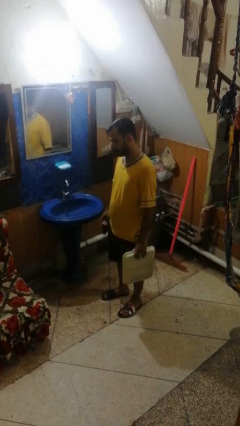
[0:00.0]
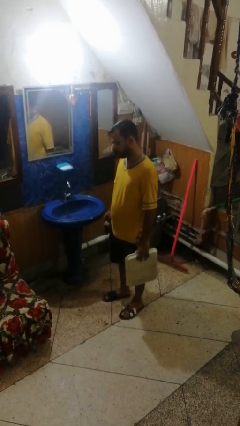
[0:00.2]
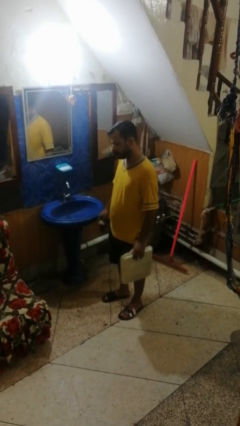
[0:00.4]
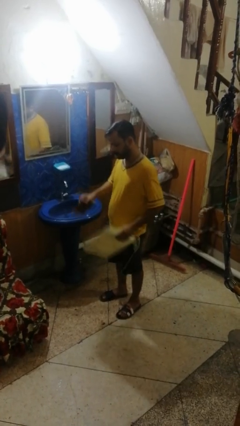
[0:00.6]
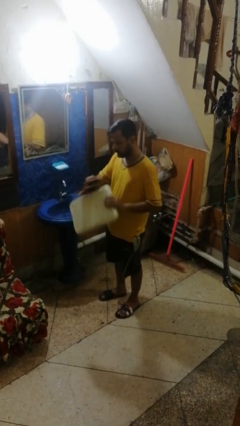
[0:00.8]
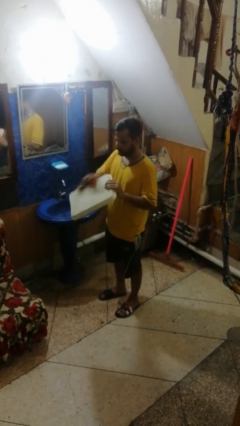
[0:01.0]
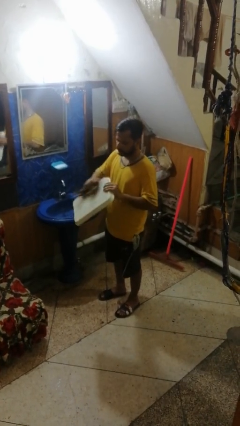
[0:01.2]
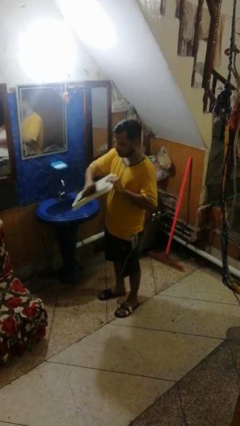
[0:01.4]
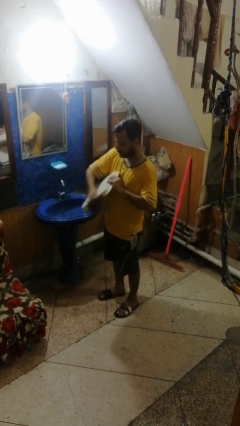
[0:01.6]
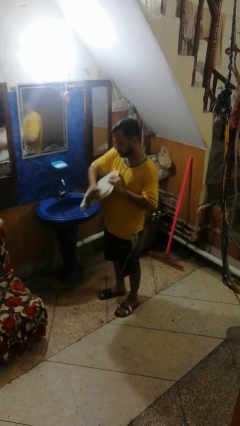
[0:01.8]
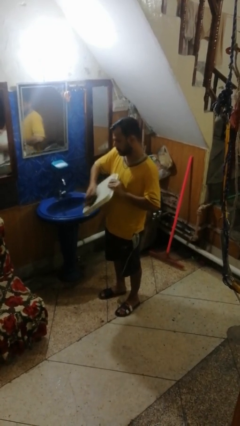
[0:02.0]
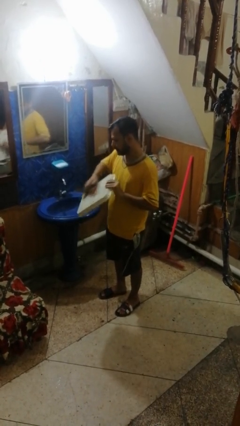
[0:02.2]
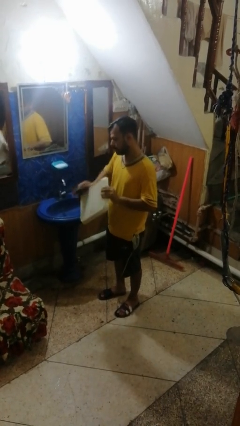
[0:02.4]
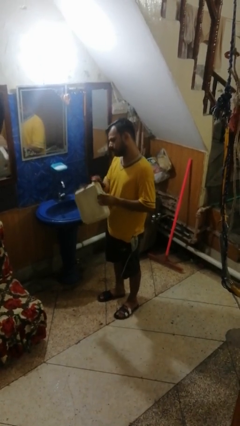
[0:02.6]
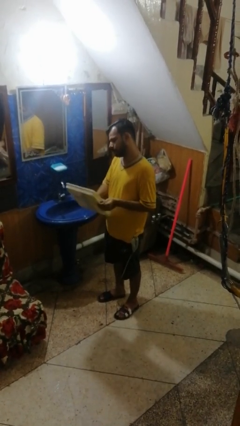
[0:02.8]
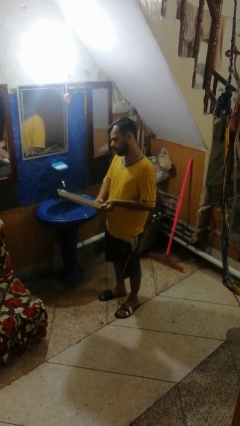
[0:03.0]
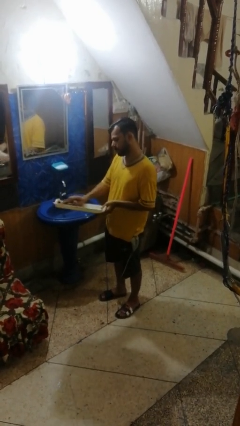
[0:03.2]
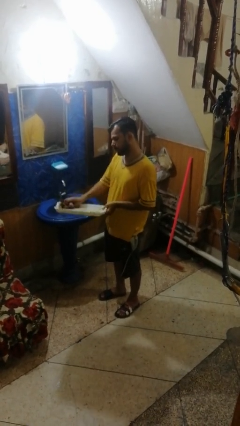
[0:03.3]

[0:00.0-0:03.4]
person dries dish

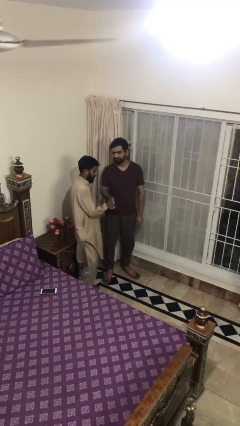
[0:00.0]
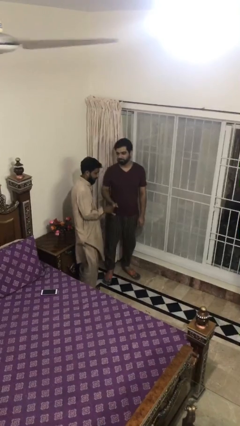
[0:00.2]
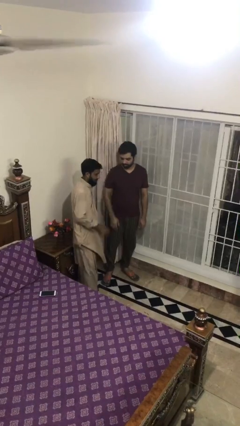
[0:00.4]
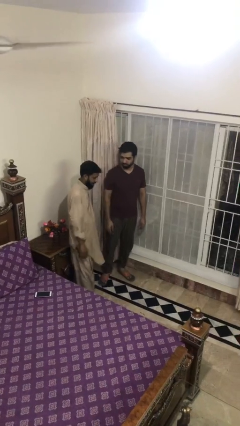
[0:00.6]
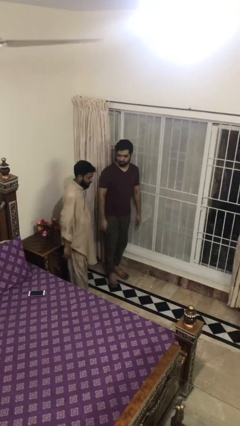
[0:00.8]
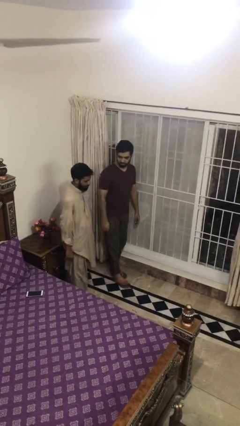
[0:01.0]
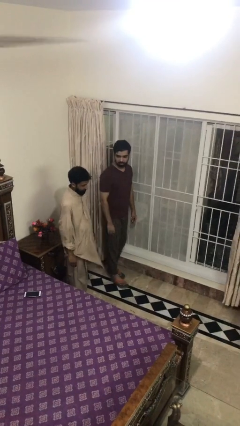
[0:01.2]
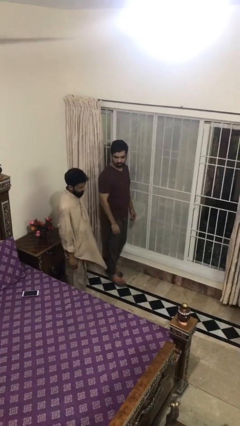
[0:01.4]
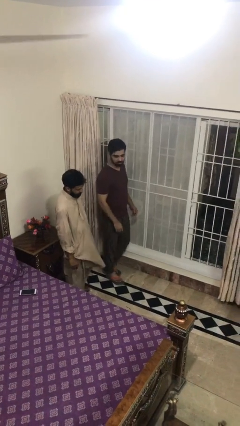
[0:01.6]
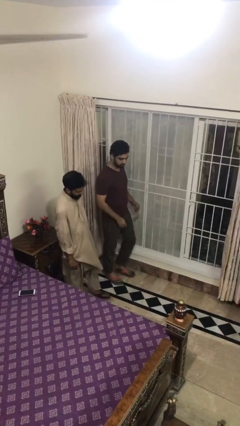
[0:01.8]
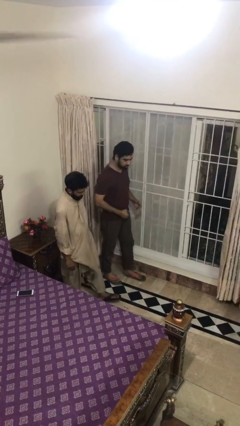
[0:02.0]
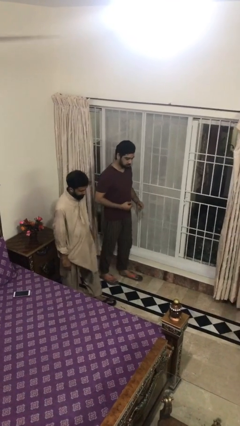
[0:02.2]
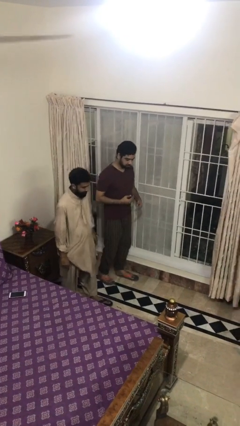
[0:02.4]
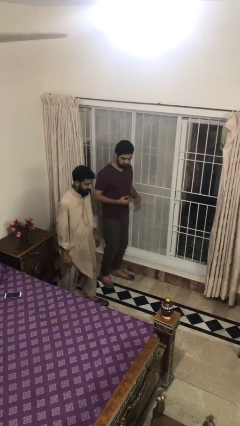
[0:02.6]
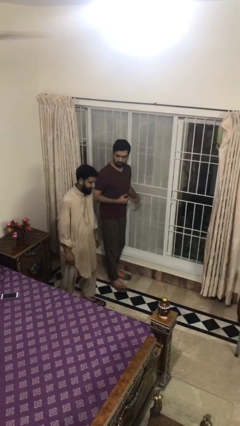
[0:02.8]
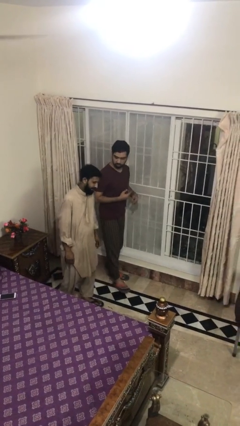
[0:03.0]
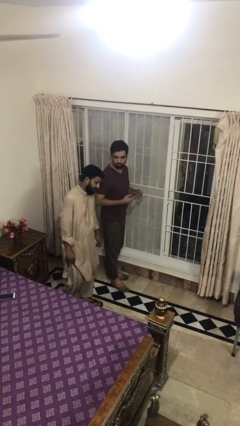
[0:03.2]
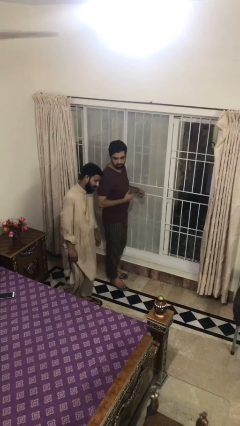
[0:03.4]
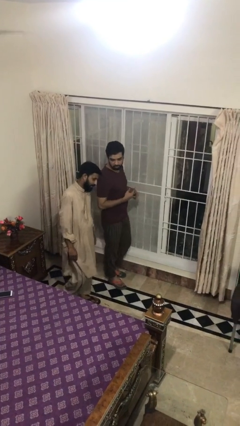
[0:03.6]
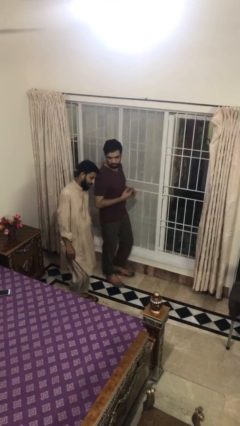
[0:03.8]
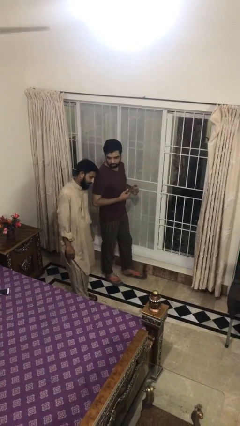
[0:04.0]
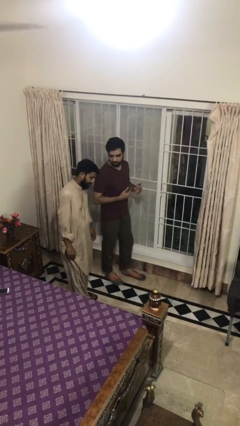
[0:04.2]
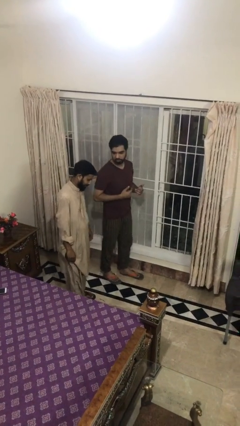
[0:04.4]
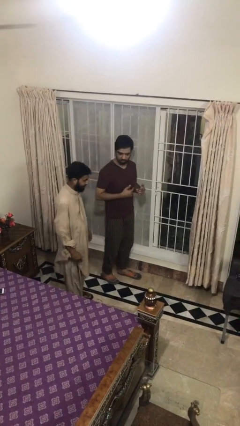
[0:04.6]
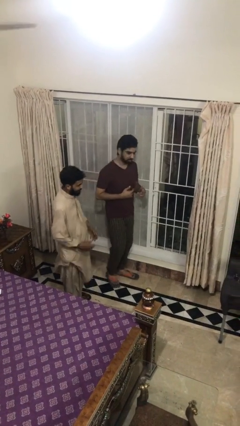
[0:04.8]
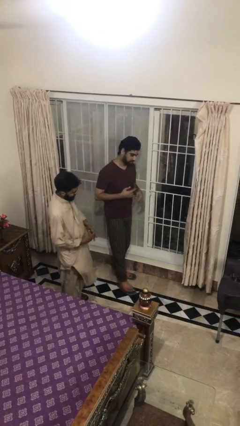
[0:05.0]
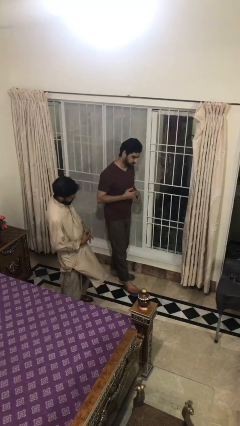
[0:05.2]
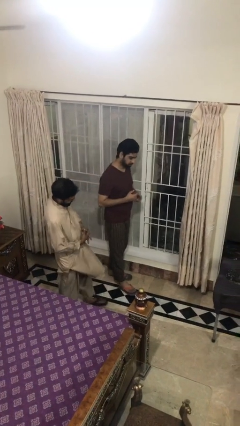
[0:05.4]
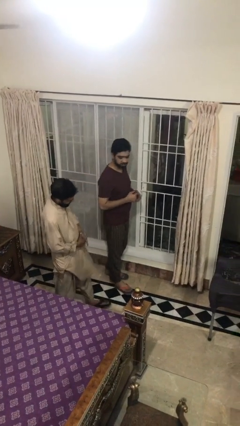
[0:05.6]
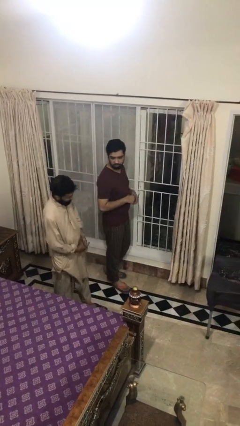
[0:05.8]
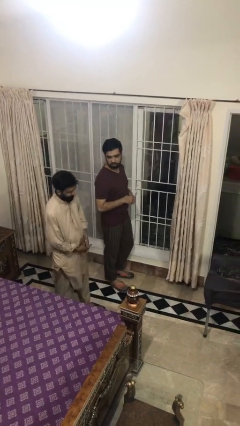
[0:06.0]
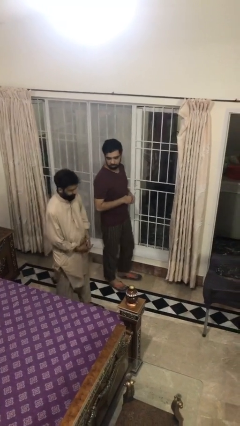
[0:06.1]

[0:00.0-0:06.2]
person talks to person

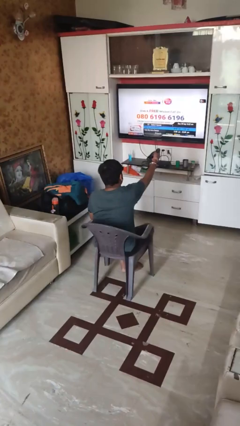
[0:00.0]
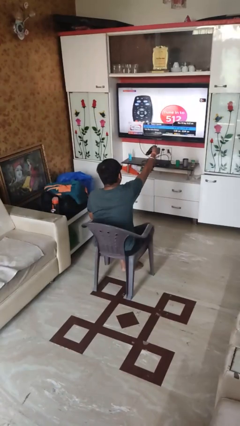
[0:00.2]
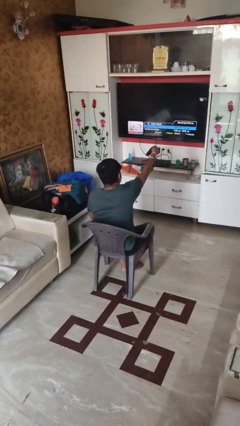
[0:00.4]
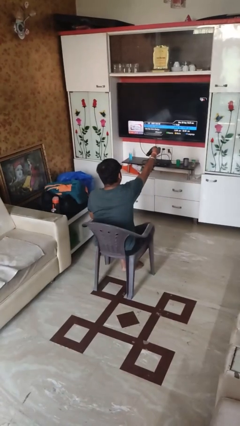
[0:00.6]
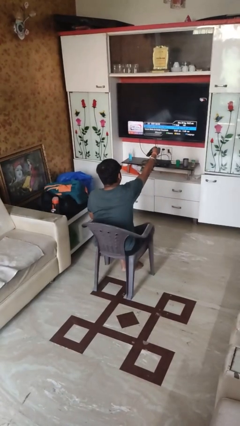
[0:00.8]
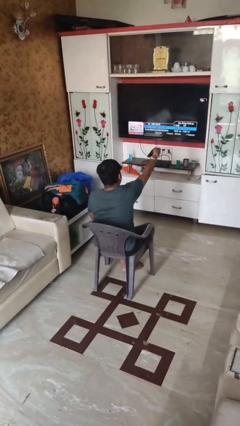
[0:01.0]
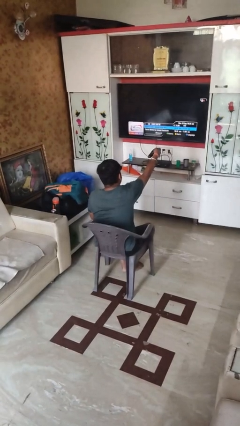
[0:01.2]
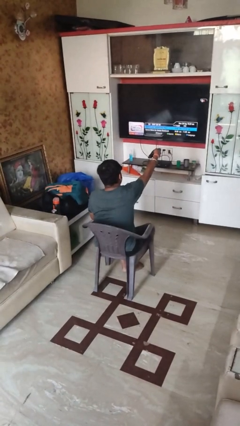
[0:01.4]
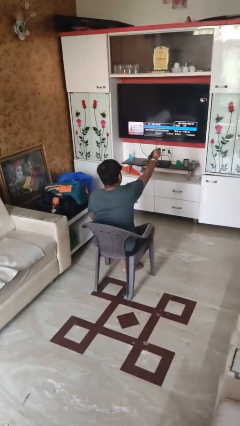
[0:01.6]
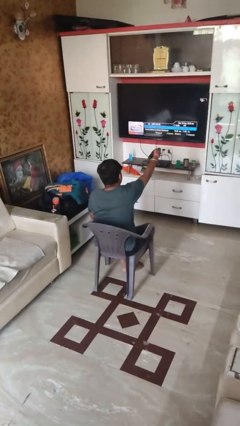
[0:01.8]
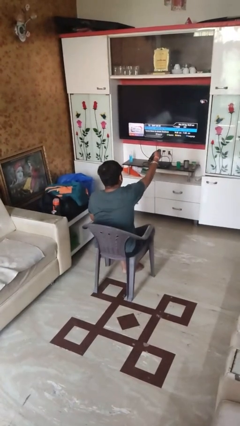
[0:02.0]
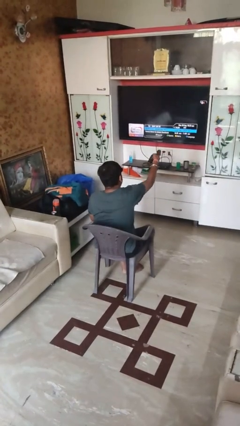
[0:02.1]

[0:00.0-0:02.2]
person uses television remote

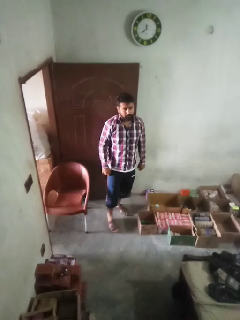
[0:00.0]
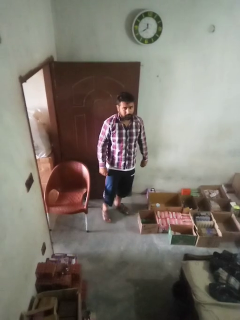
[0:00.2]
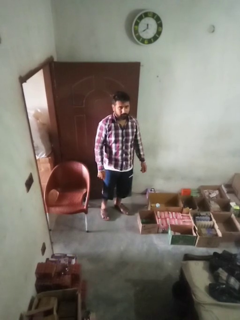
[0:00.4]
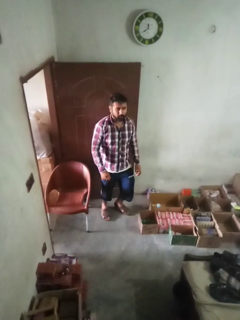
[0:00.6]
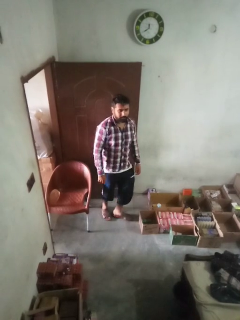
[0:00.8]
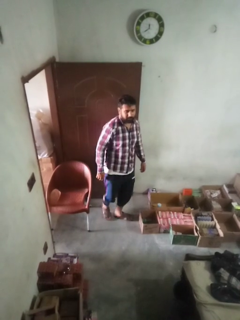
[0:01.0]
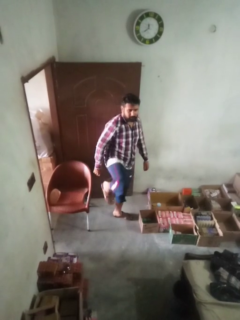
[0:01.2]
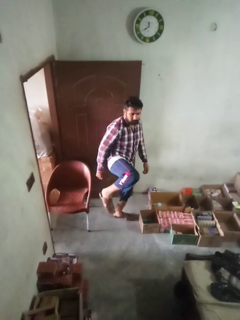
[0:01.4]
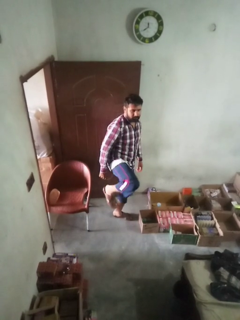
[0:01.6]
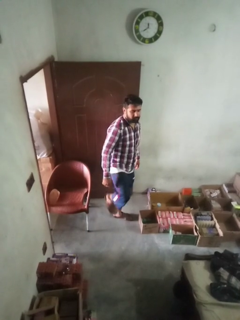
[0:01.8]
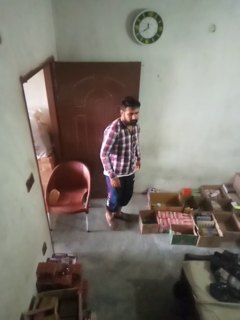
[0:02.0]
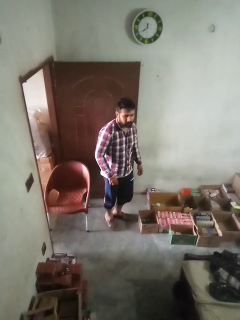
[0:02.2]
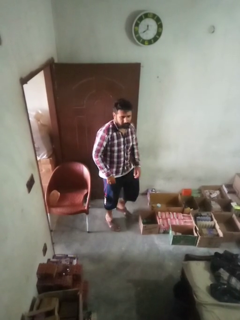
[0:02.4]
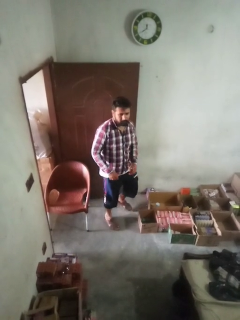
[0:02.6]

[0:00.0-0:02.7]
person karate kicks

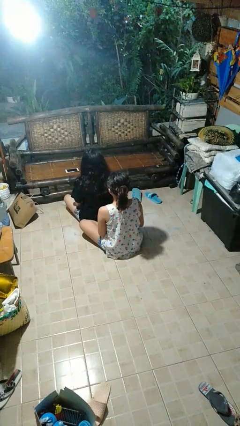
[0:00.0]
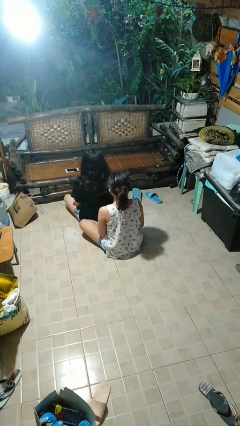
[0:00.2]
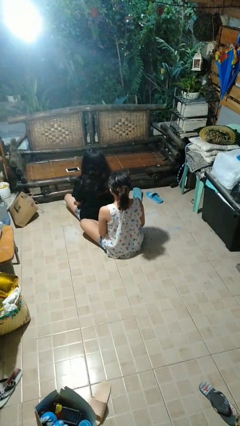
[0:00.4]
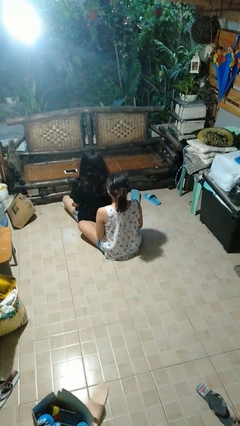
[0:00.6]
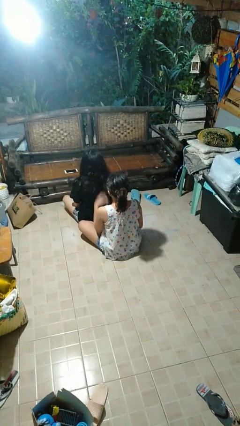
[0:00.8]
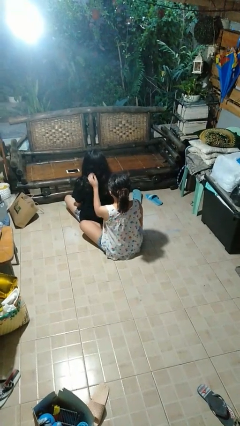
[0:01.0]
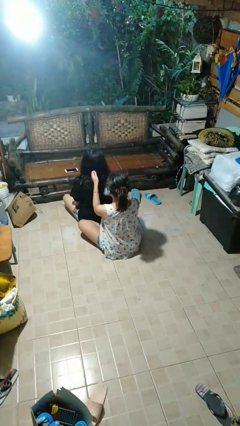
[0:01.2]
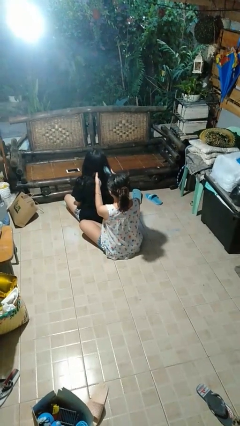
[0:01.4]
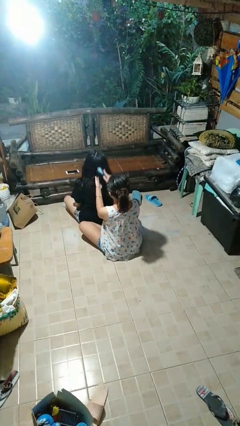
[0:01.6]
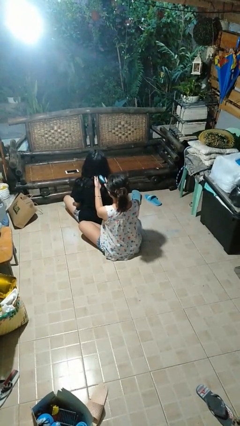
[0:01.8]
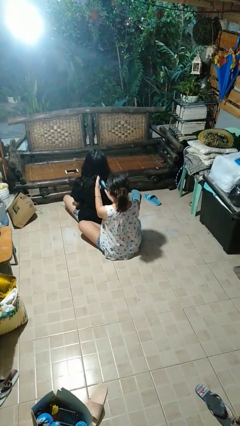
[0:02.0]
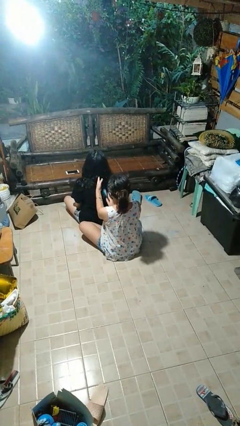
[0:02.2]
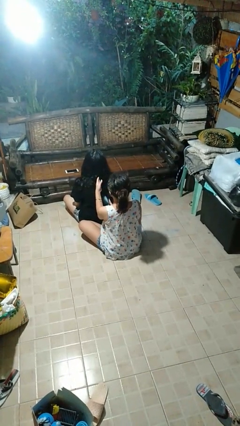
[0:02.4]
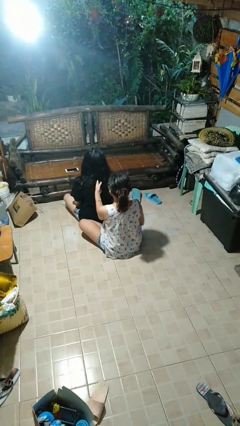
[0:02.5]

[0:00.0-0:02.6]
person brushes hair of person

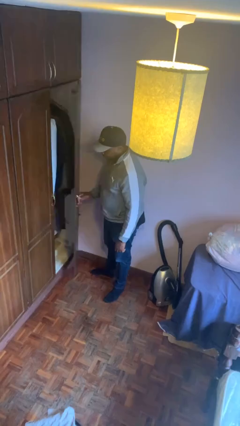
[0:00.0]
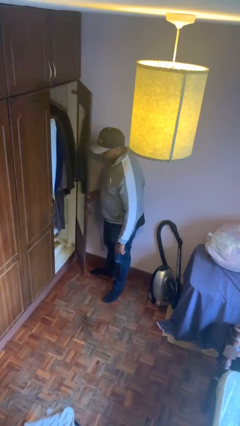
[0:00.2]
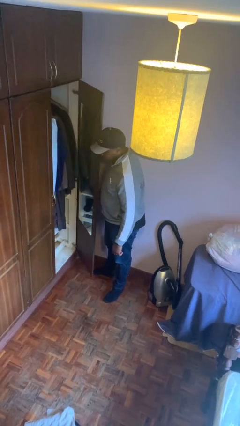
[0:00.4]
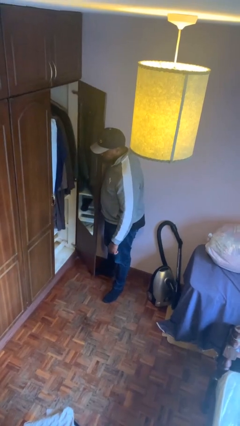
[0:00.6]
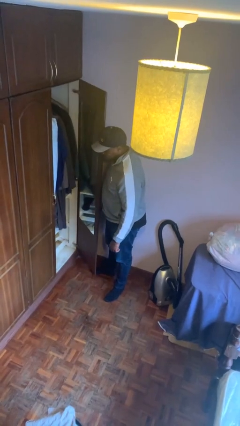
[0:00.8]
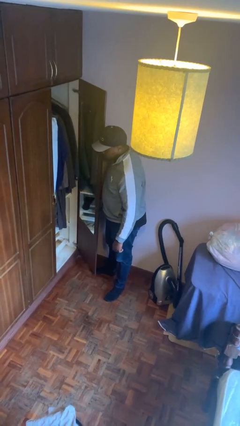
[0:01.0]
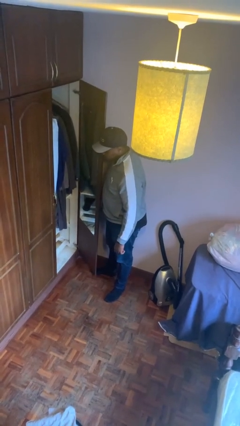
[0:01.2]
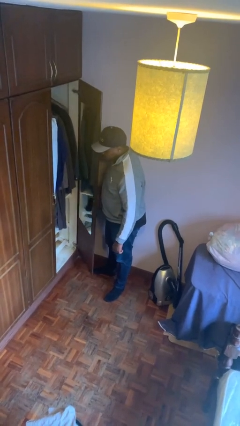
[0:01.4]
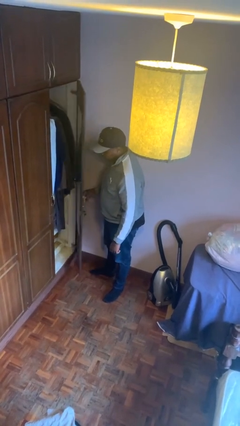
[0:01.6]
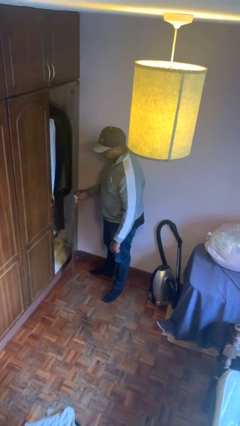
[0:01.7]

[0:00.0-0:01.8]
person opens closet door
